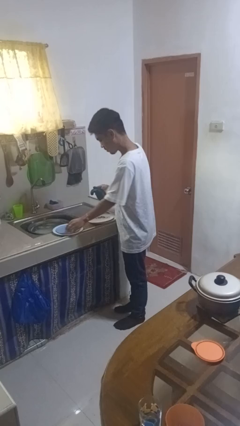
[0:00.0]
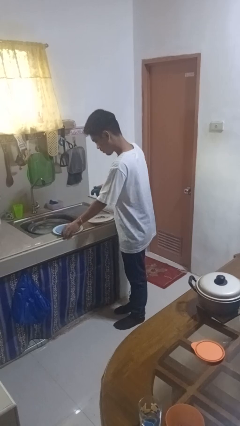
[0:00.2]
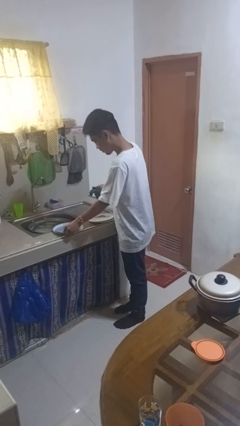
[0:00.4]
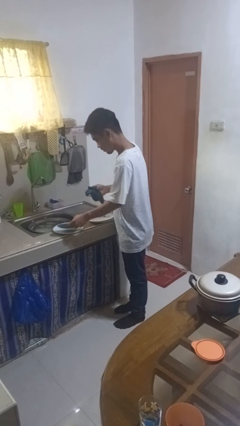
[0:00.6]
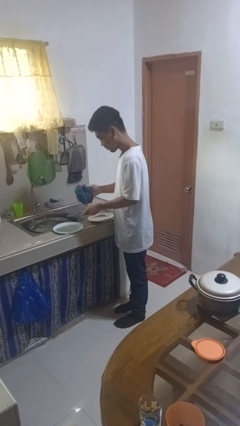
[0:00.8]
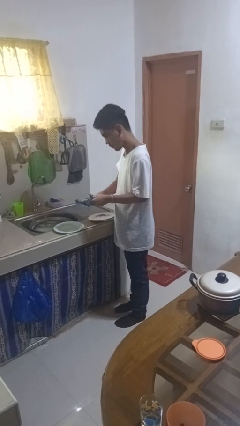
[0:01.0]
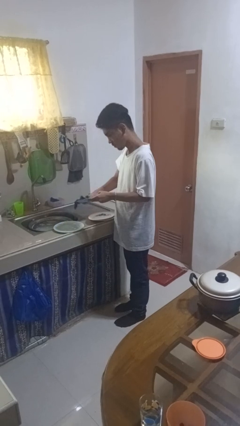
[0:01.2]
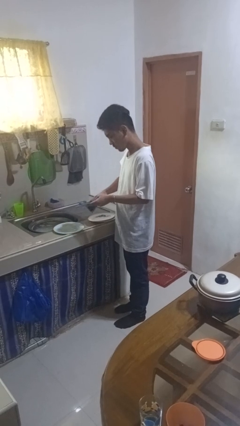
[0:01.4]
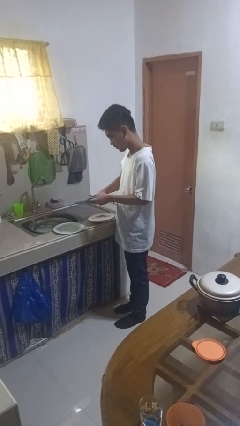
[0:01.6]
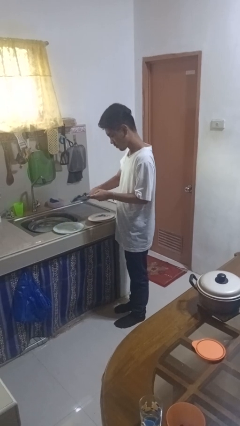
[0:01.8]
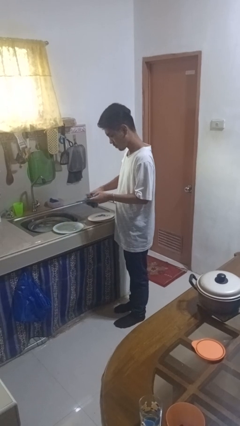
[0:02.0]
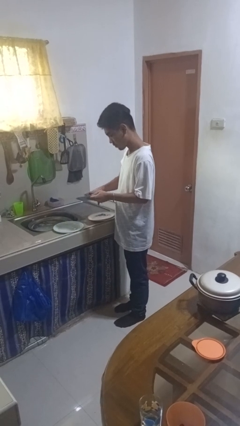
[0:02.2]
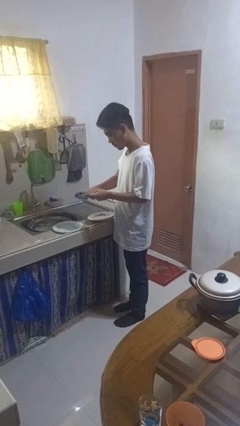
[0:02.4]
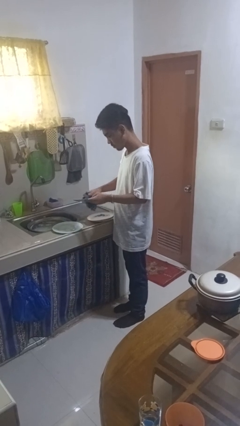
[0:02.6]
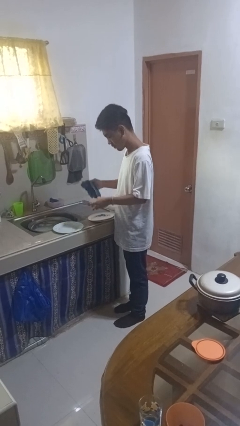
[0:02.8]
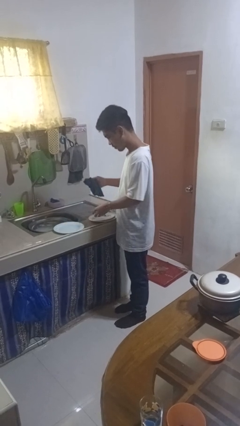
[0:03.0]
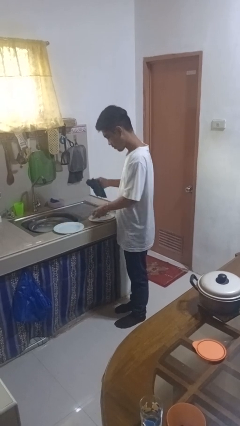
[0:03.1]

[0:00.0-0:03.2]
person dries dish

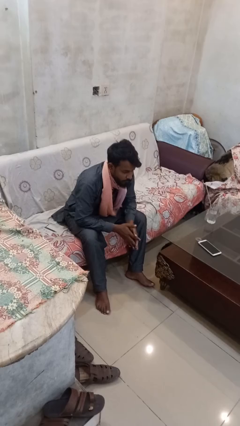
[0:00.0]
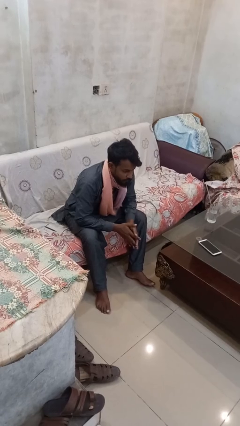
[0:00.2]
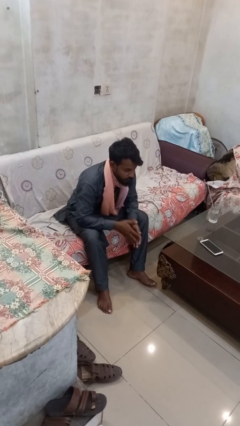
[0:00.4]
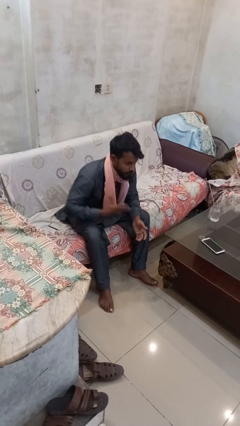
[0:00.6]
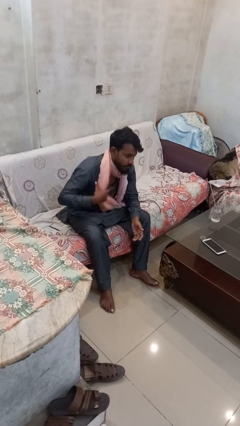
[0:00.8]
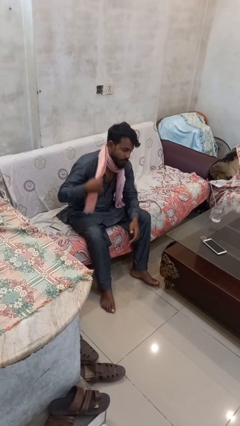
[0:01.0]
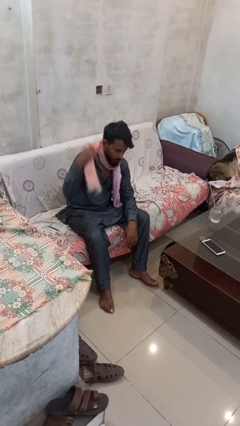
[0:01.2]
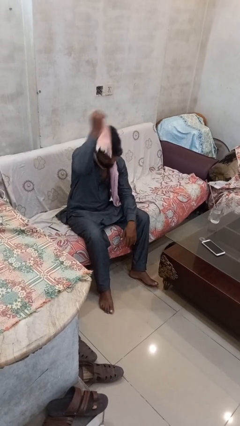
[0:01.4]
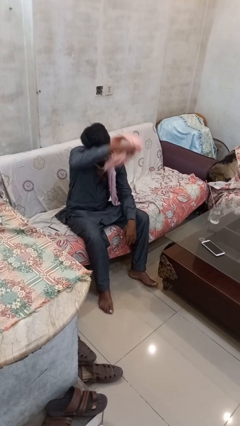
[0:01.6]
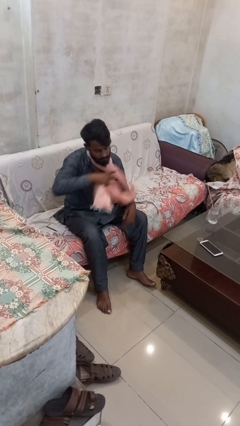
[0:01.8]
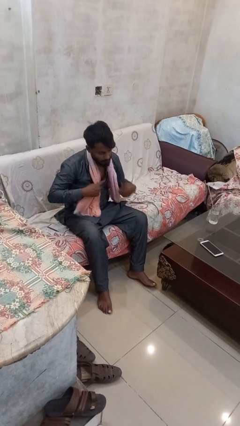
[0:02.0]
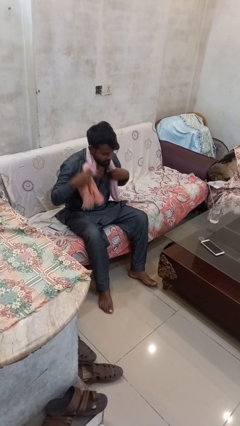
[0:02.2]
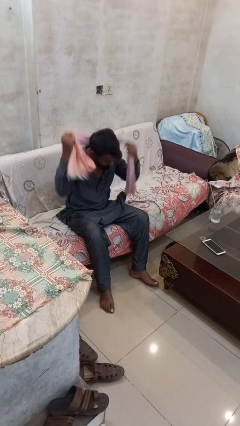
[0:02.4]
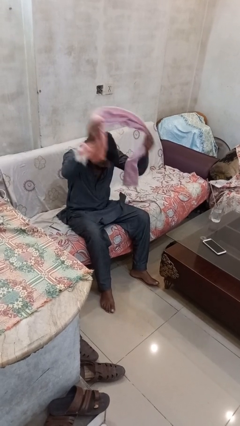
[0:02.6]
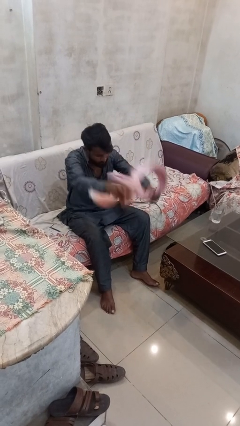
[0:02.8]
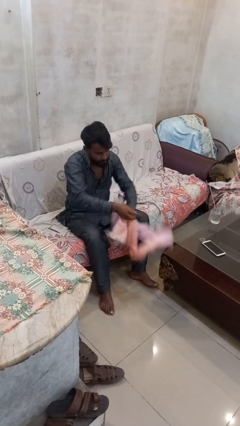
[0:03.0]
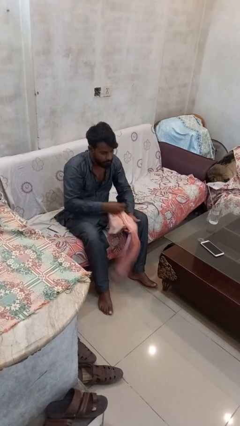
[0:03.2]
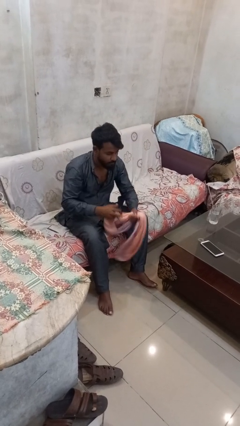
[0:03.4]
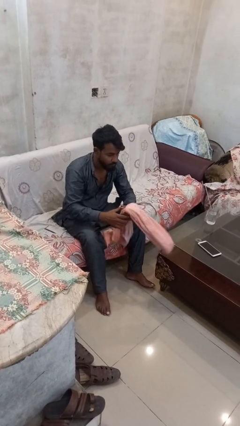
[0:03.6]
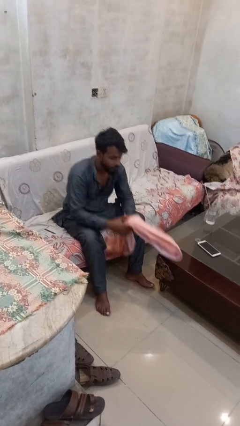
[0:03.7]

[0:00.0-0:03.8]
person takes off scarf

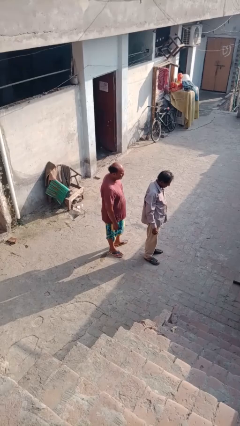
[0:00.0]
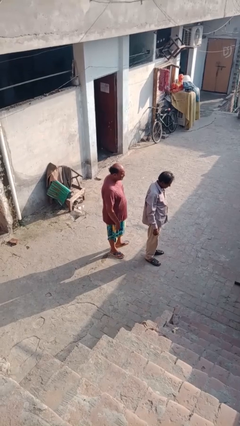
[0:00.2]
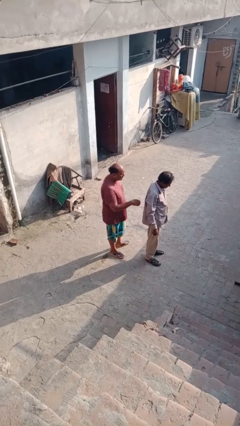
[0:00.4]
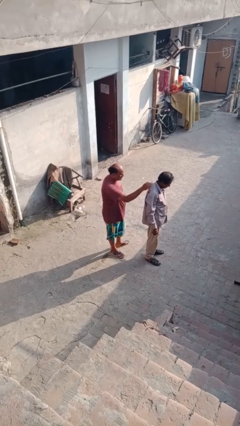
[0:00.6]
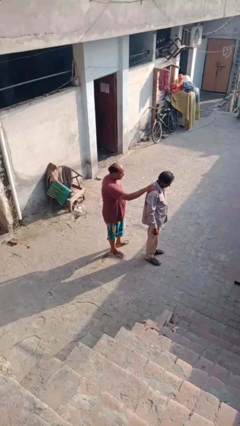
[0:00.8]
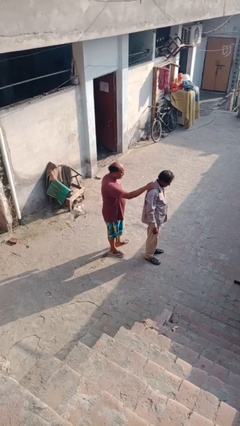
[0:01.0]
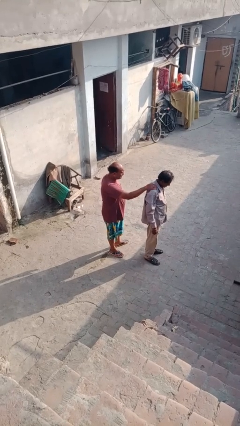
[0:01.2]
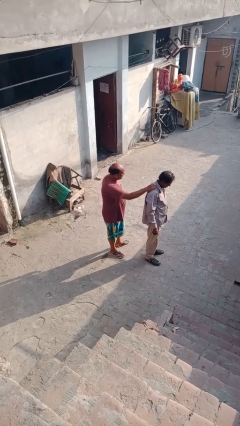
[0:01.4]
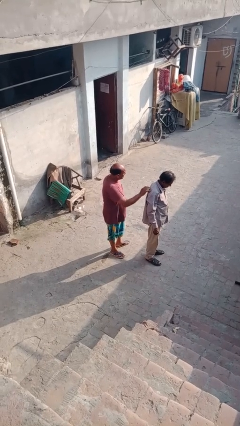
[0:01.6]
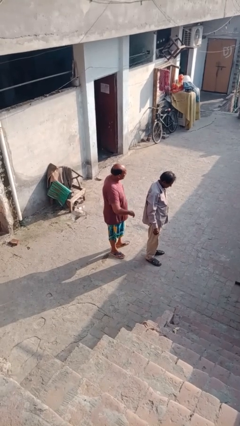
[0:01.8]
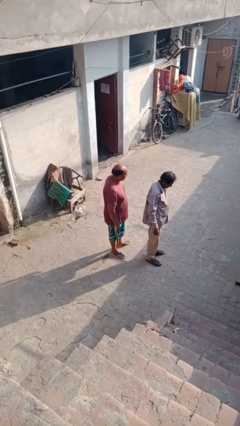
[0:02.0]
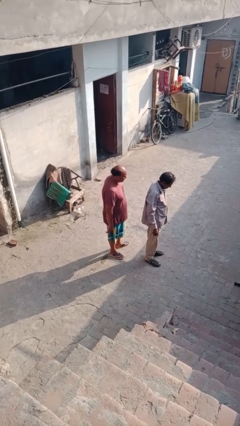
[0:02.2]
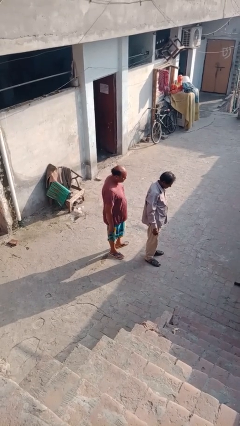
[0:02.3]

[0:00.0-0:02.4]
person touches back of person

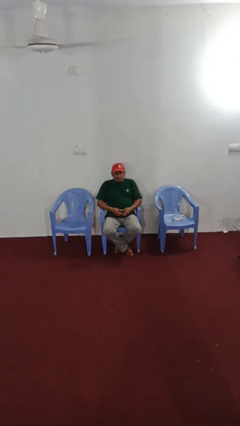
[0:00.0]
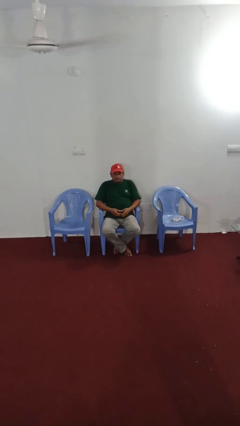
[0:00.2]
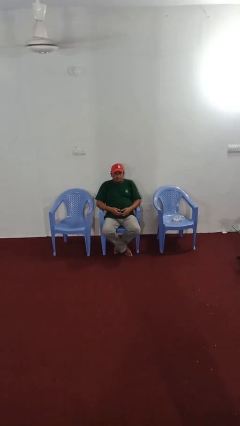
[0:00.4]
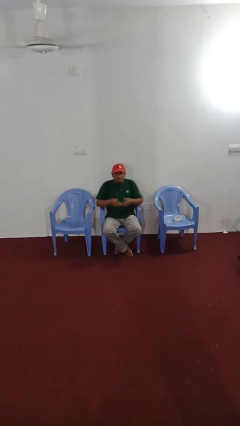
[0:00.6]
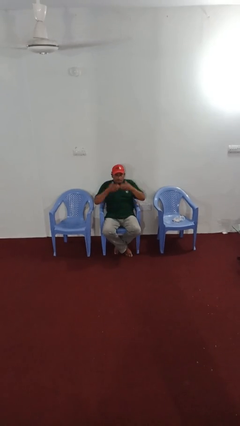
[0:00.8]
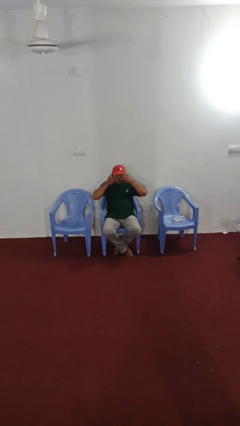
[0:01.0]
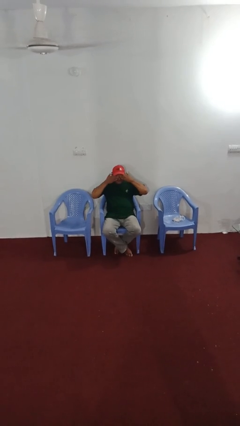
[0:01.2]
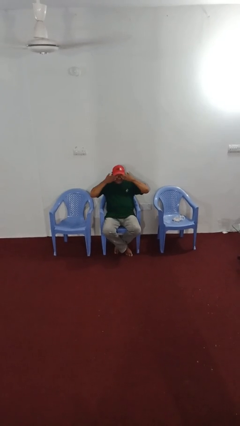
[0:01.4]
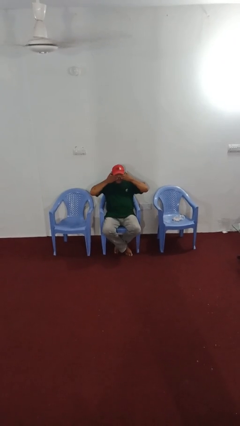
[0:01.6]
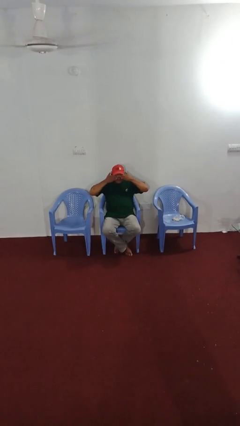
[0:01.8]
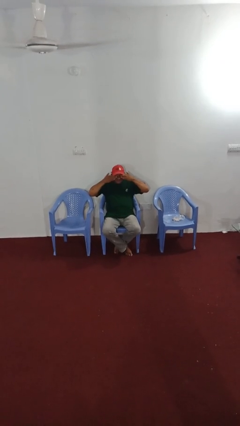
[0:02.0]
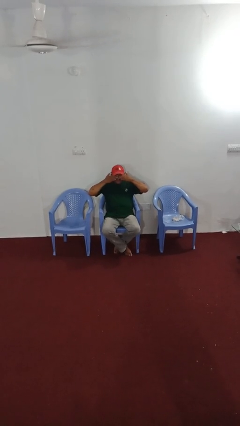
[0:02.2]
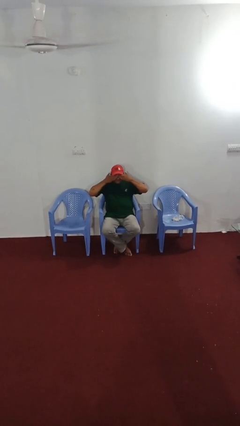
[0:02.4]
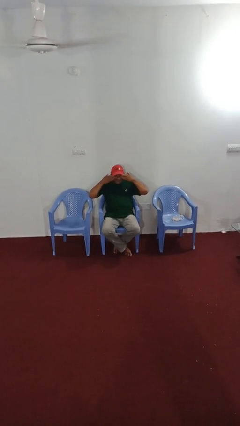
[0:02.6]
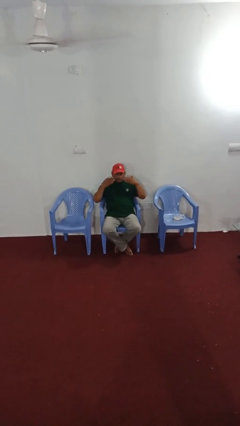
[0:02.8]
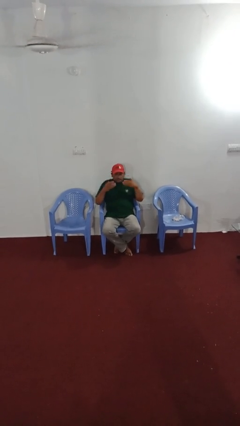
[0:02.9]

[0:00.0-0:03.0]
person rubs eyes

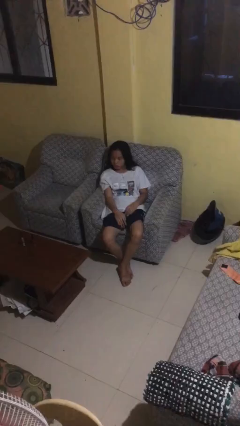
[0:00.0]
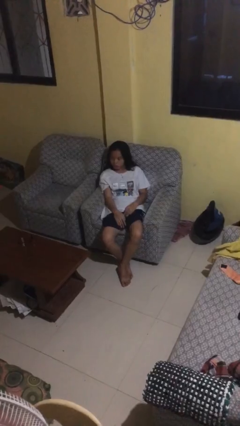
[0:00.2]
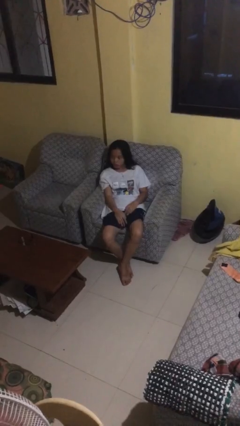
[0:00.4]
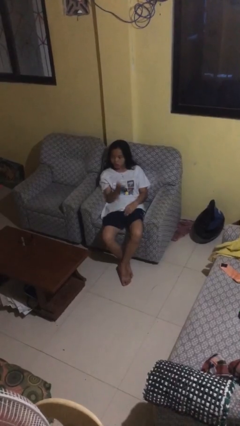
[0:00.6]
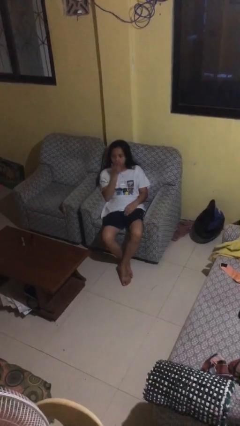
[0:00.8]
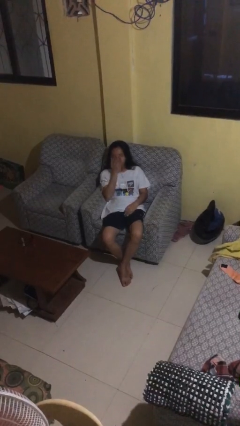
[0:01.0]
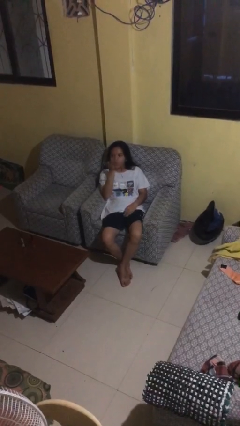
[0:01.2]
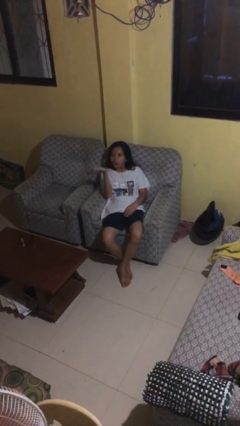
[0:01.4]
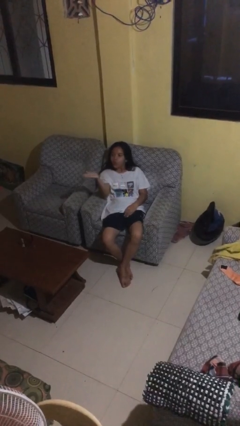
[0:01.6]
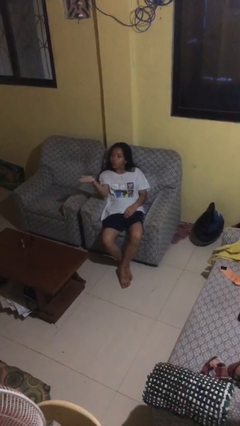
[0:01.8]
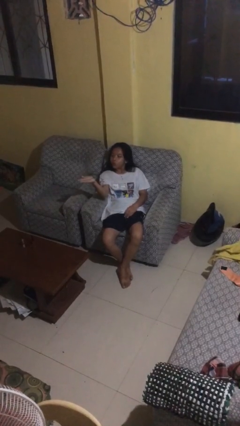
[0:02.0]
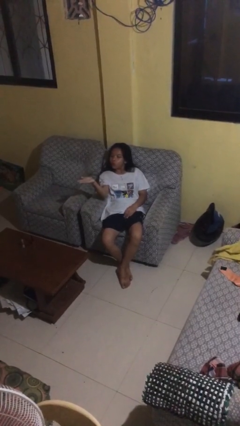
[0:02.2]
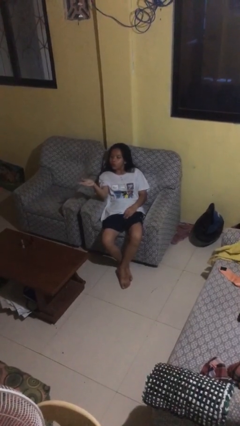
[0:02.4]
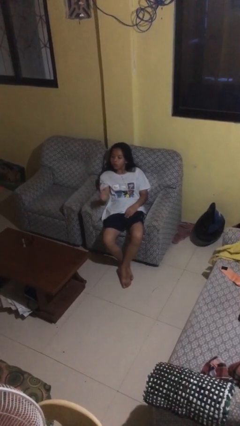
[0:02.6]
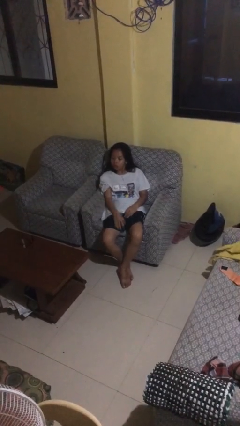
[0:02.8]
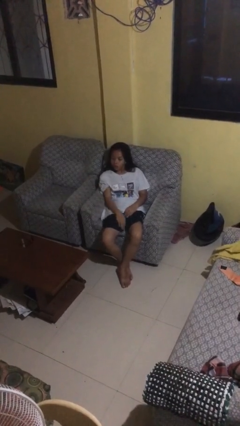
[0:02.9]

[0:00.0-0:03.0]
person gestures blow kiss

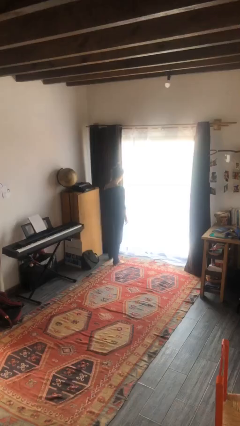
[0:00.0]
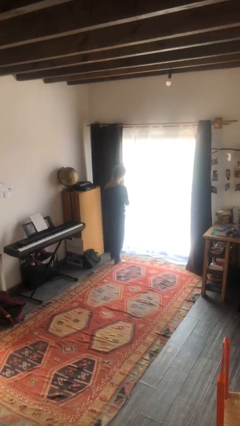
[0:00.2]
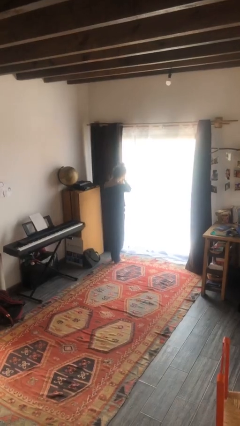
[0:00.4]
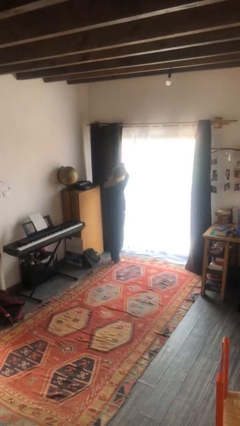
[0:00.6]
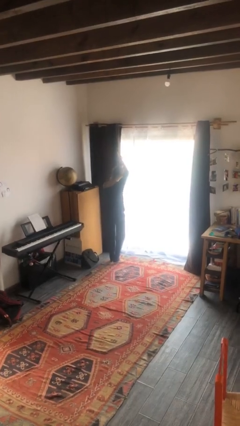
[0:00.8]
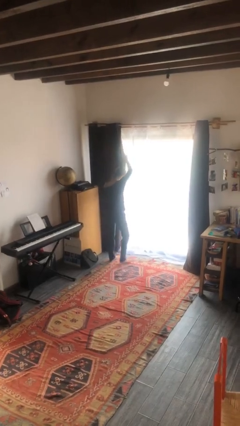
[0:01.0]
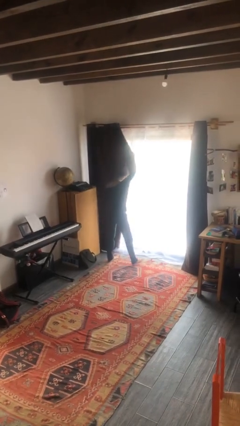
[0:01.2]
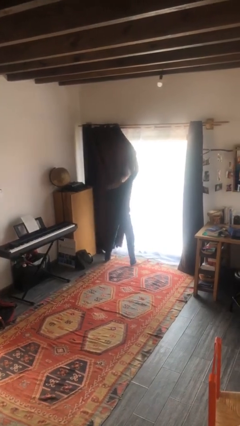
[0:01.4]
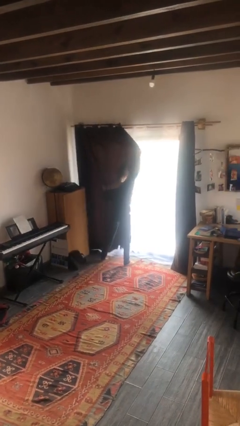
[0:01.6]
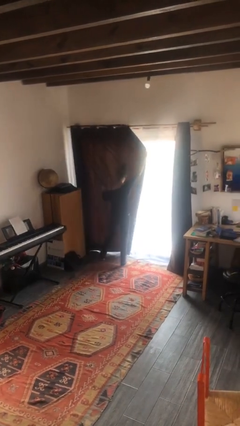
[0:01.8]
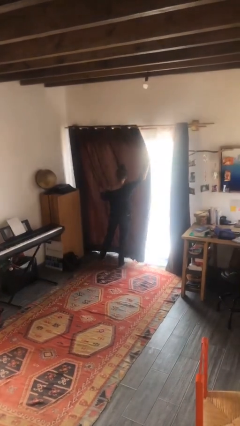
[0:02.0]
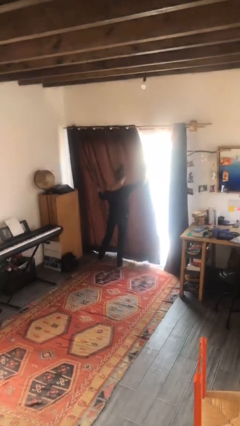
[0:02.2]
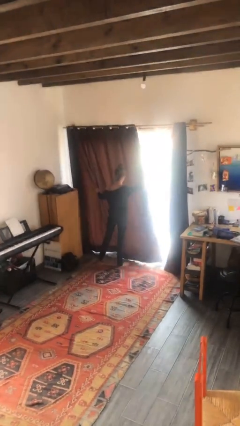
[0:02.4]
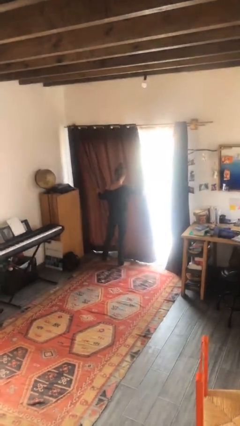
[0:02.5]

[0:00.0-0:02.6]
person closes curtains
